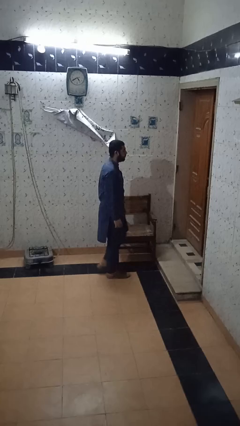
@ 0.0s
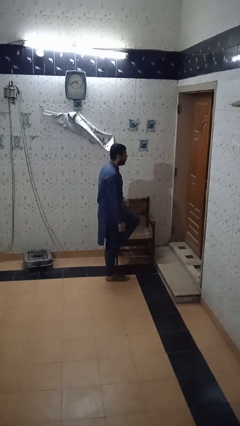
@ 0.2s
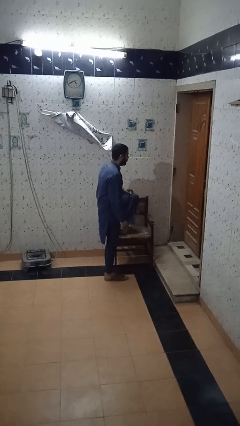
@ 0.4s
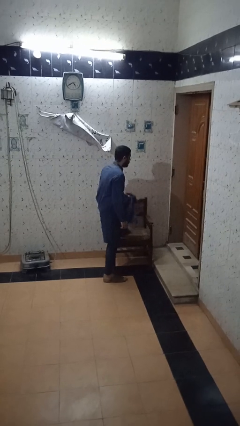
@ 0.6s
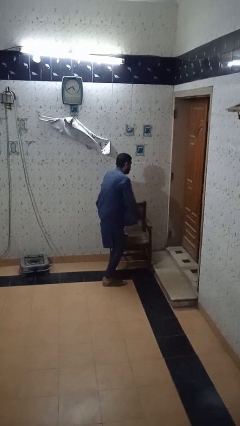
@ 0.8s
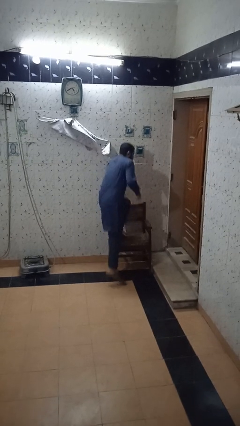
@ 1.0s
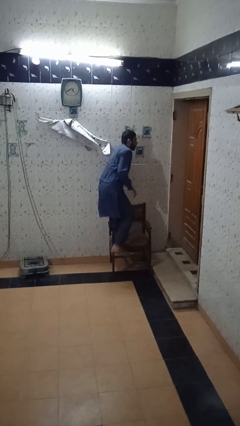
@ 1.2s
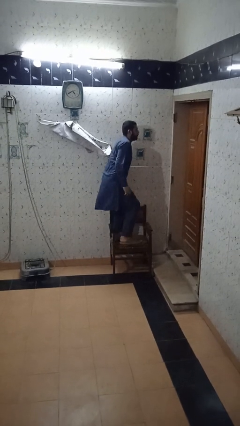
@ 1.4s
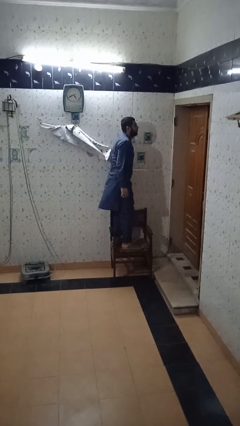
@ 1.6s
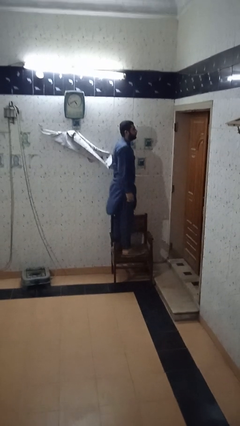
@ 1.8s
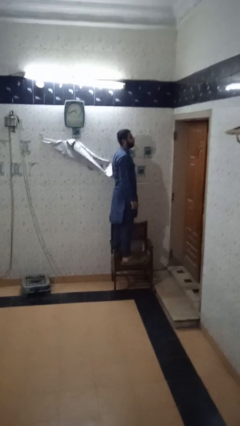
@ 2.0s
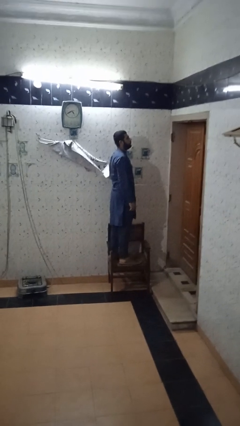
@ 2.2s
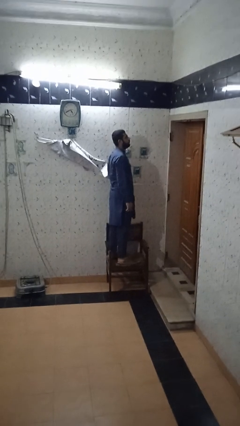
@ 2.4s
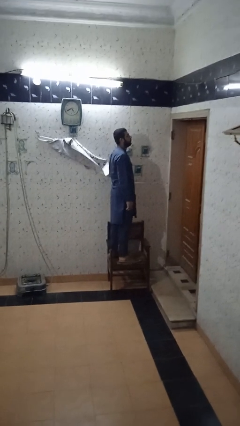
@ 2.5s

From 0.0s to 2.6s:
person climbs on chair

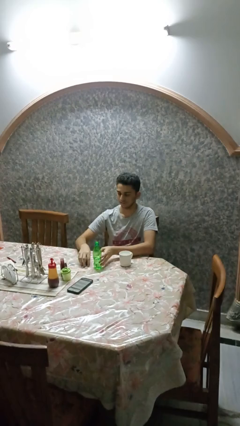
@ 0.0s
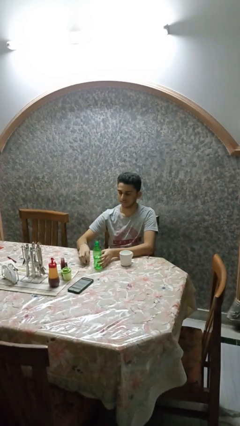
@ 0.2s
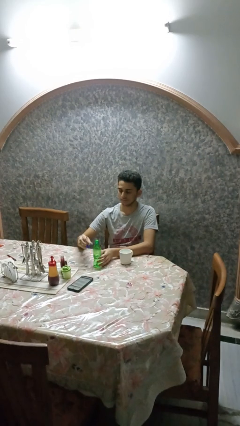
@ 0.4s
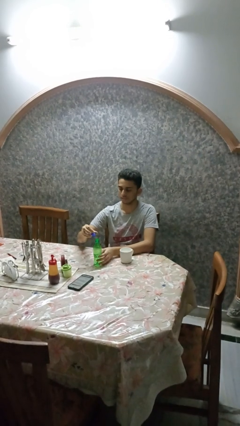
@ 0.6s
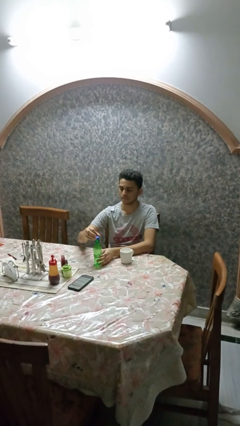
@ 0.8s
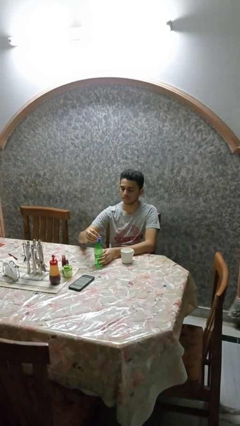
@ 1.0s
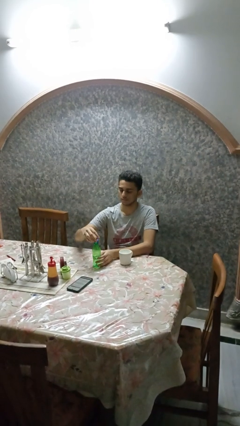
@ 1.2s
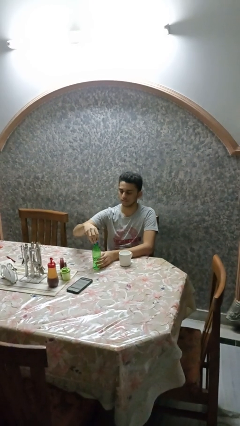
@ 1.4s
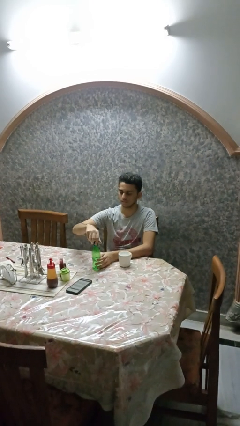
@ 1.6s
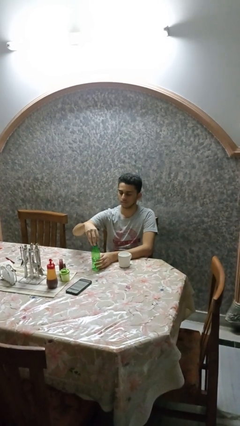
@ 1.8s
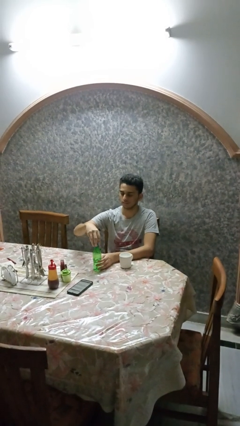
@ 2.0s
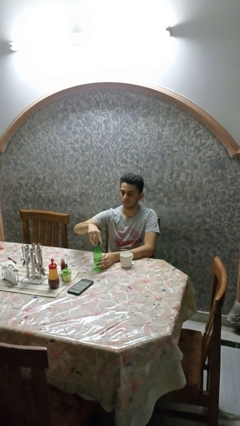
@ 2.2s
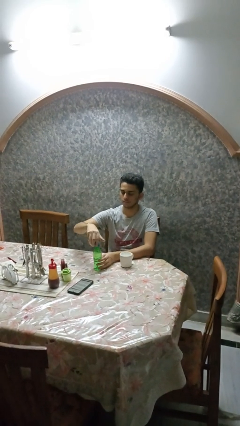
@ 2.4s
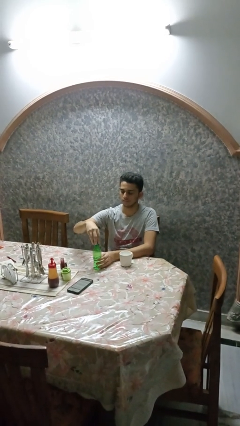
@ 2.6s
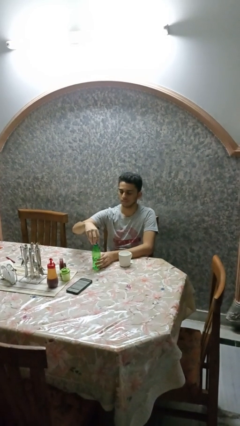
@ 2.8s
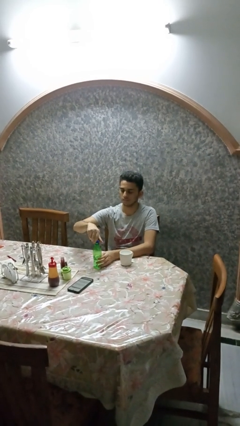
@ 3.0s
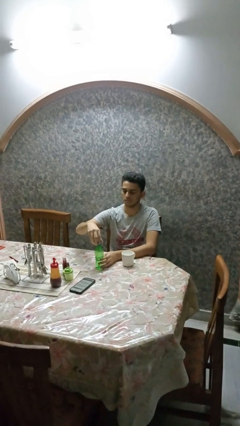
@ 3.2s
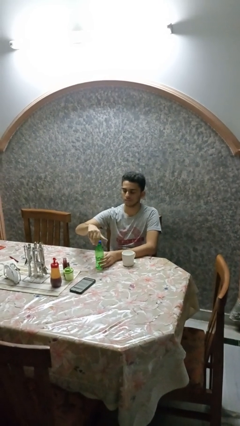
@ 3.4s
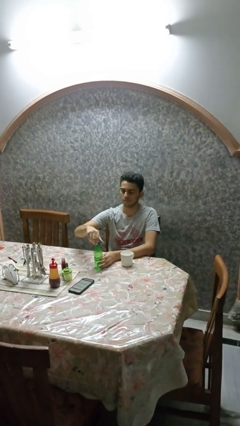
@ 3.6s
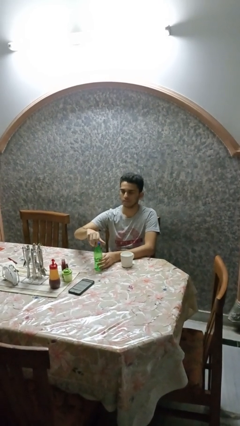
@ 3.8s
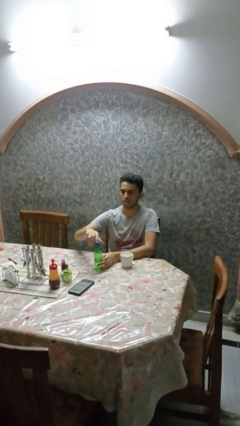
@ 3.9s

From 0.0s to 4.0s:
person screws lid to bottle

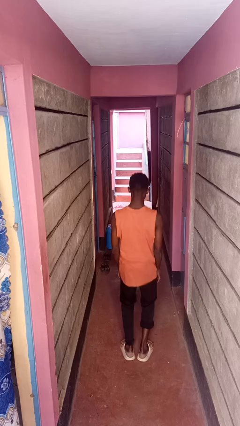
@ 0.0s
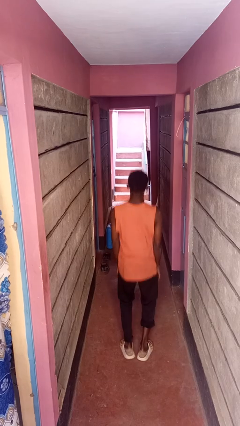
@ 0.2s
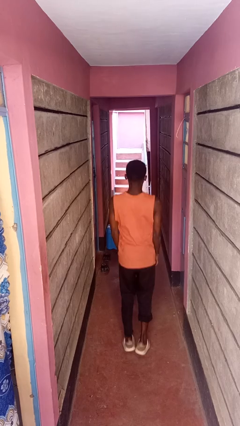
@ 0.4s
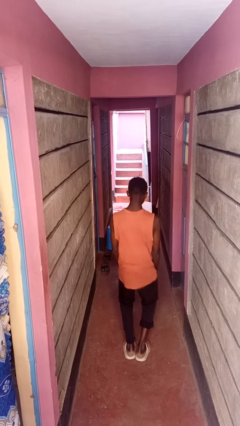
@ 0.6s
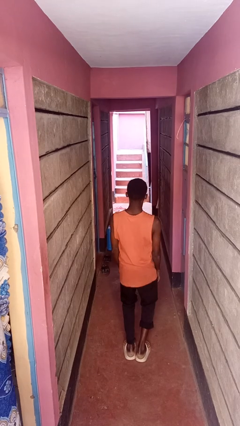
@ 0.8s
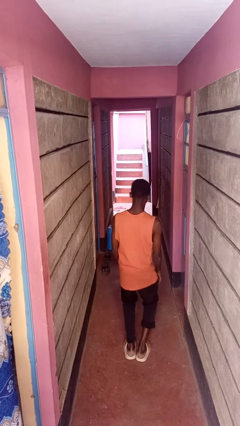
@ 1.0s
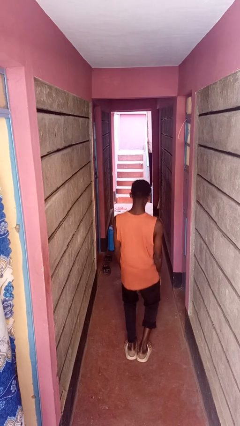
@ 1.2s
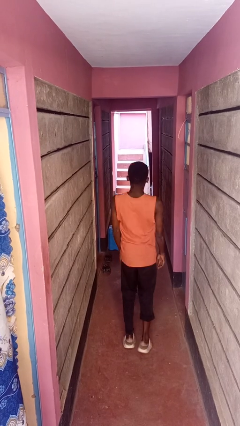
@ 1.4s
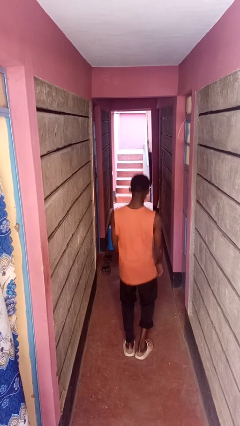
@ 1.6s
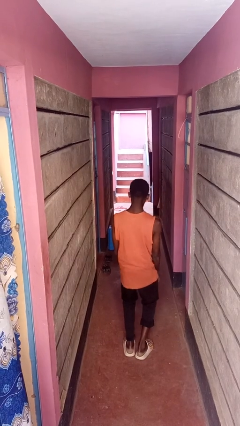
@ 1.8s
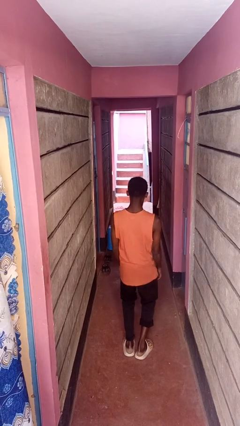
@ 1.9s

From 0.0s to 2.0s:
person dances in place

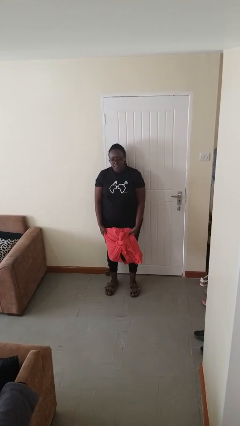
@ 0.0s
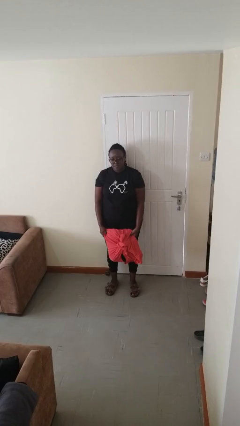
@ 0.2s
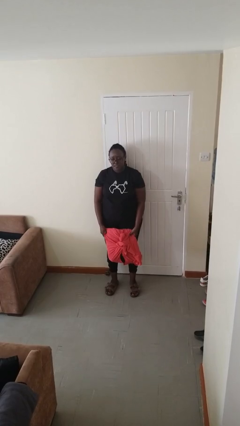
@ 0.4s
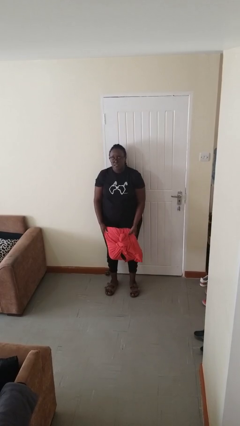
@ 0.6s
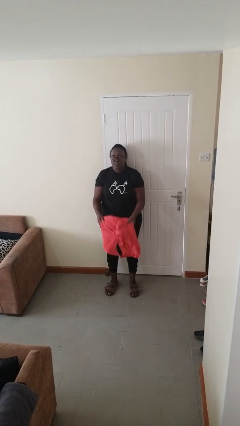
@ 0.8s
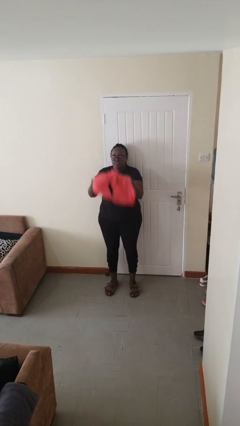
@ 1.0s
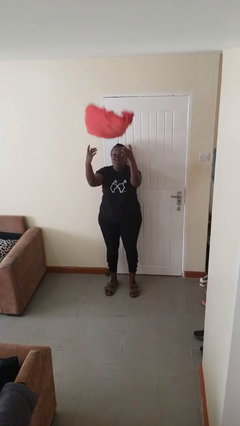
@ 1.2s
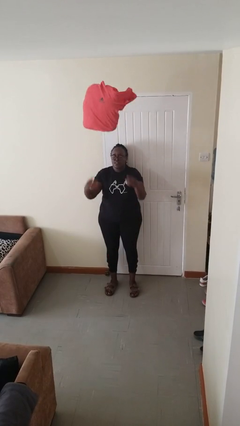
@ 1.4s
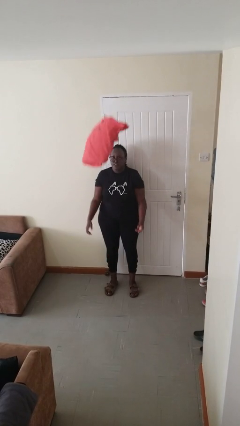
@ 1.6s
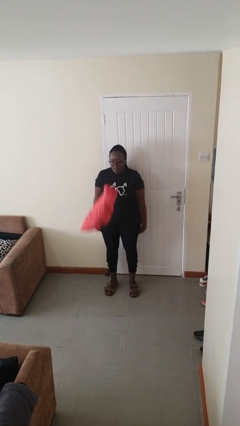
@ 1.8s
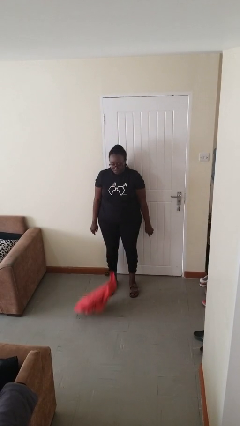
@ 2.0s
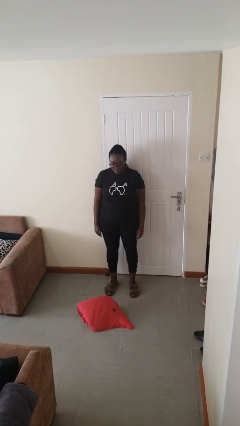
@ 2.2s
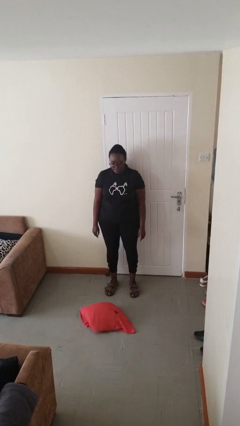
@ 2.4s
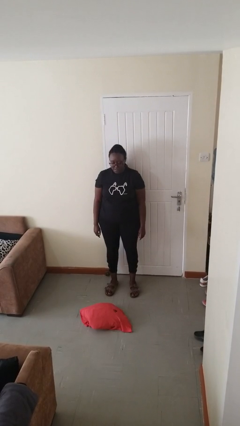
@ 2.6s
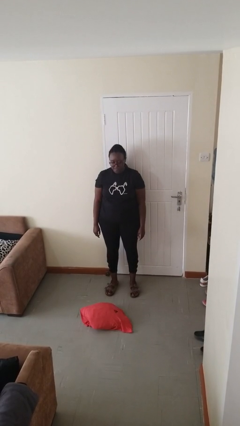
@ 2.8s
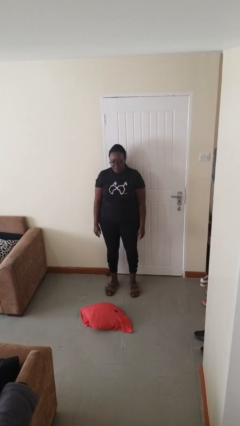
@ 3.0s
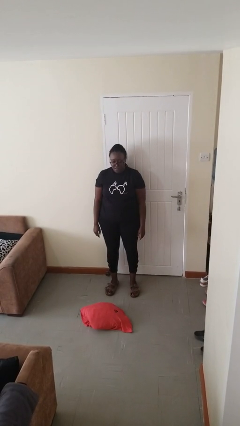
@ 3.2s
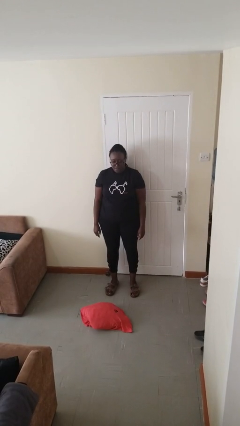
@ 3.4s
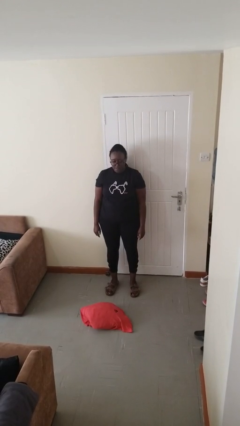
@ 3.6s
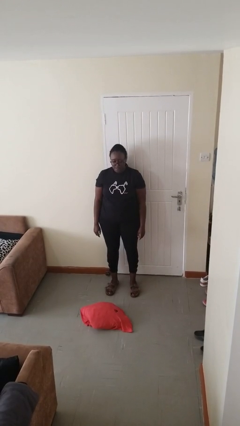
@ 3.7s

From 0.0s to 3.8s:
person throws object into air

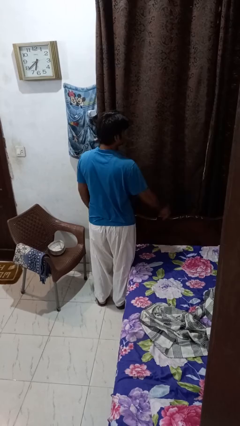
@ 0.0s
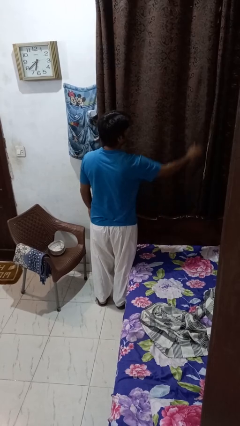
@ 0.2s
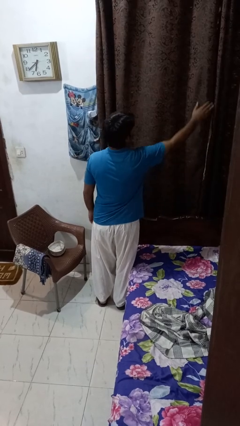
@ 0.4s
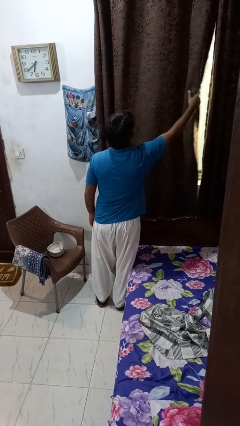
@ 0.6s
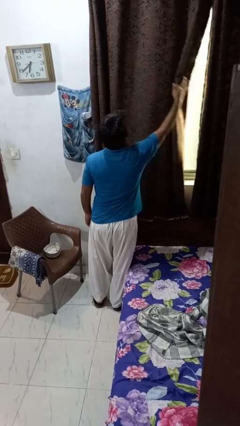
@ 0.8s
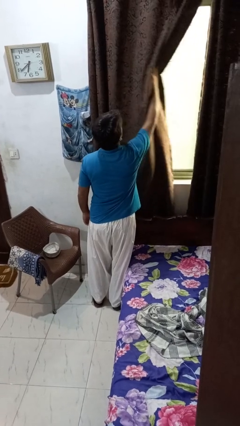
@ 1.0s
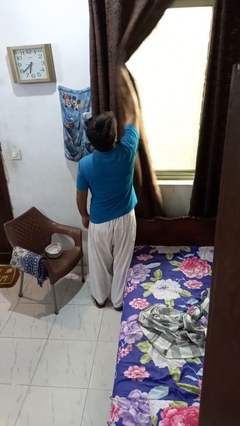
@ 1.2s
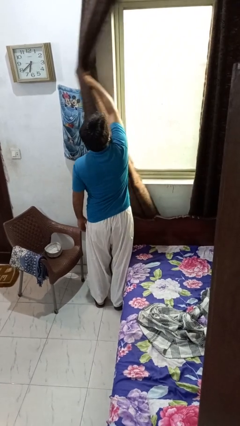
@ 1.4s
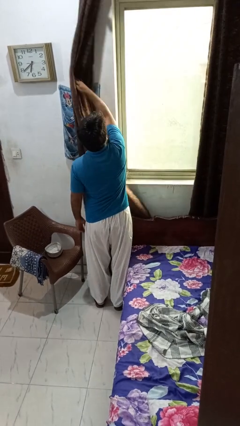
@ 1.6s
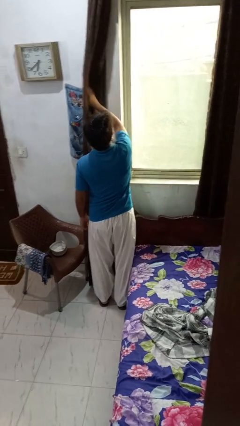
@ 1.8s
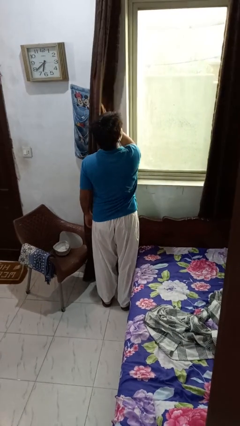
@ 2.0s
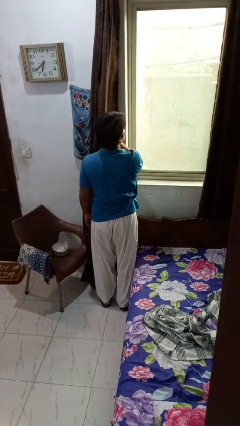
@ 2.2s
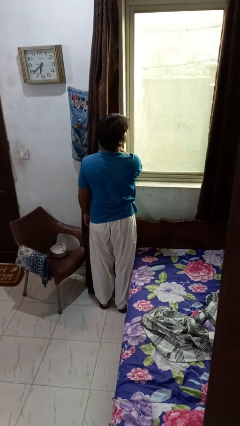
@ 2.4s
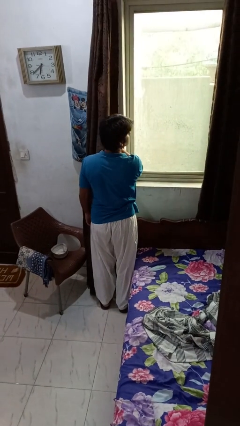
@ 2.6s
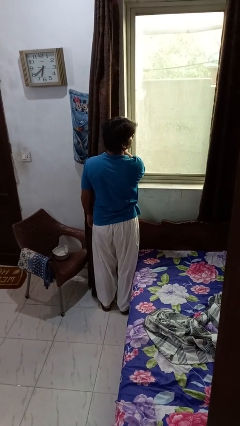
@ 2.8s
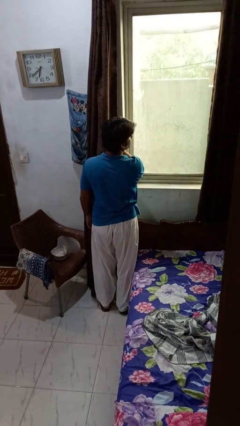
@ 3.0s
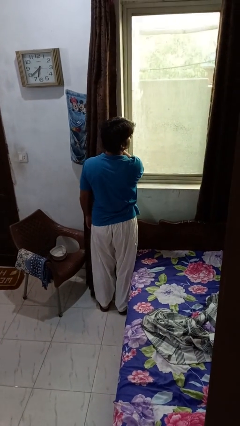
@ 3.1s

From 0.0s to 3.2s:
person opens curtains

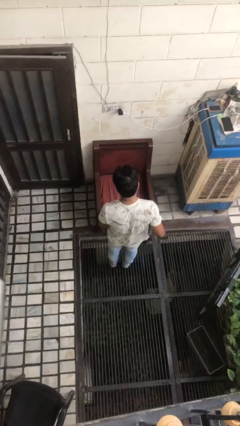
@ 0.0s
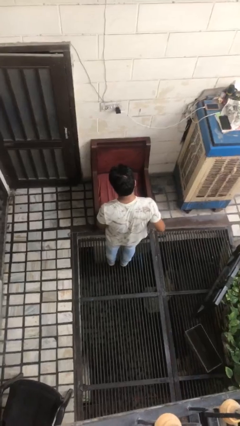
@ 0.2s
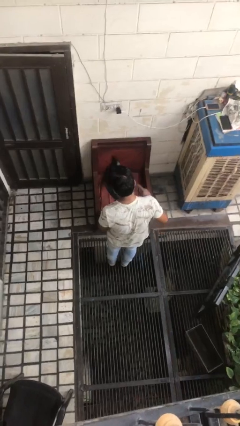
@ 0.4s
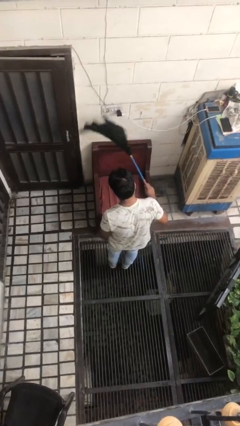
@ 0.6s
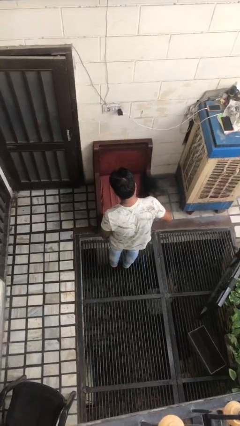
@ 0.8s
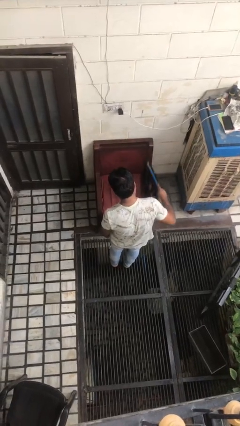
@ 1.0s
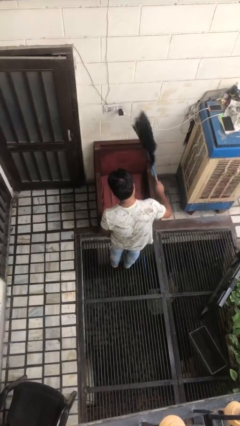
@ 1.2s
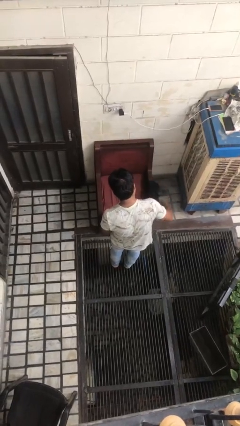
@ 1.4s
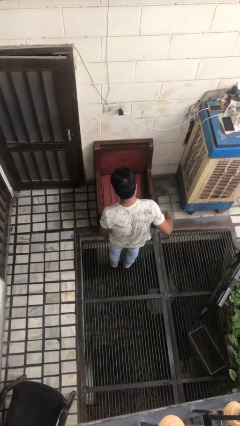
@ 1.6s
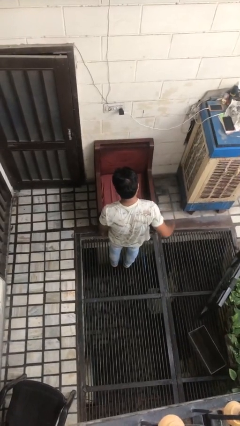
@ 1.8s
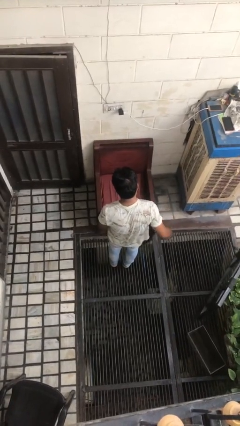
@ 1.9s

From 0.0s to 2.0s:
person dusts furniture
